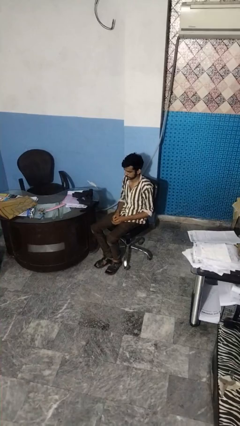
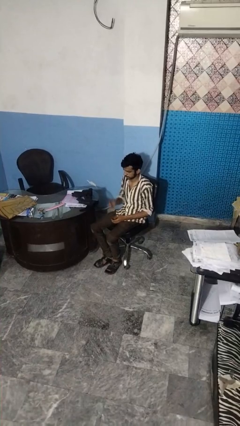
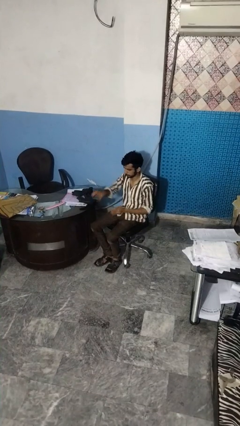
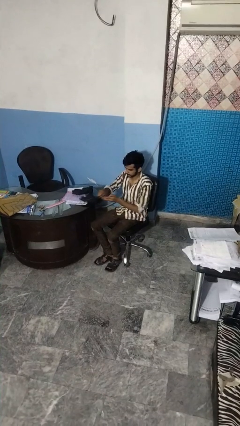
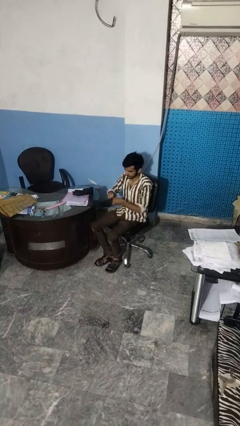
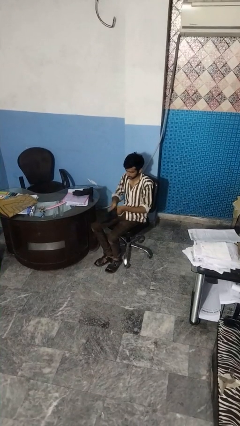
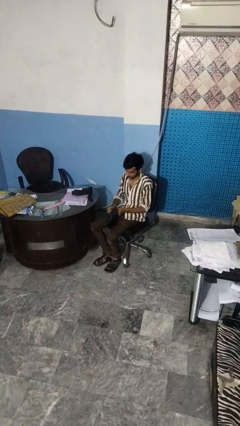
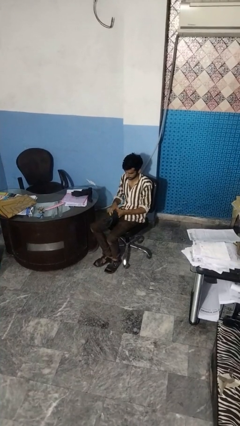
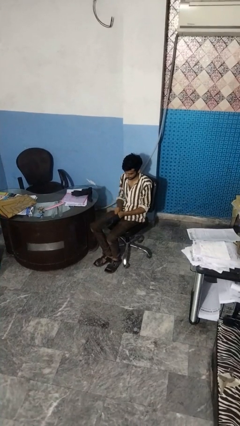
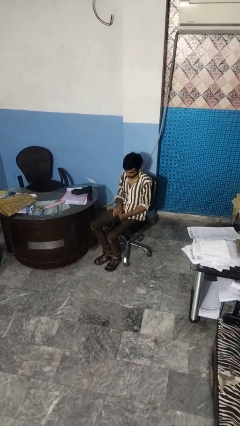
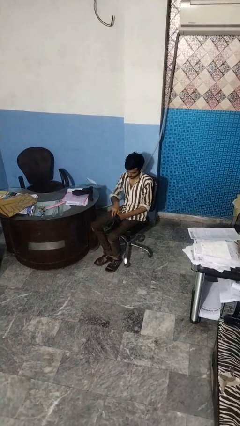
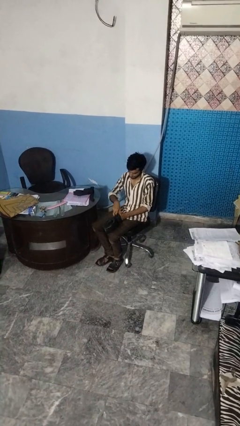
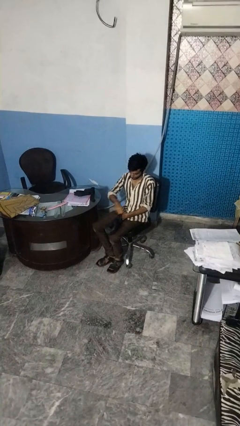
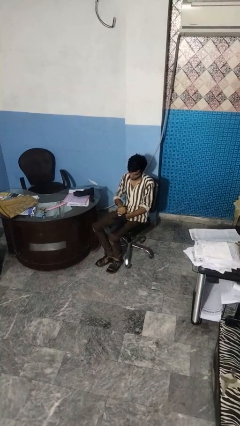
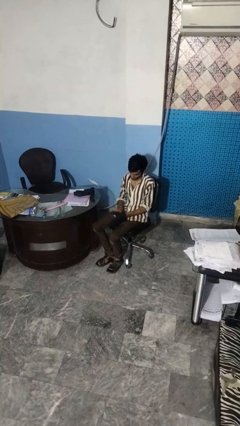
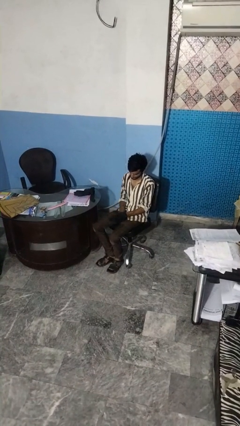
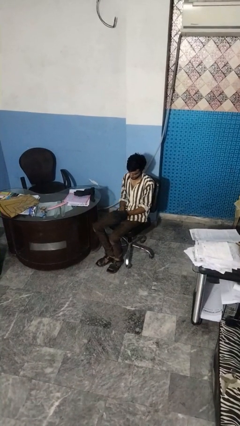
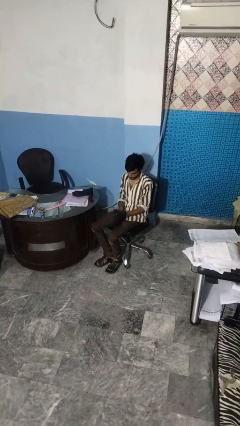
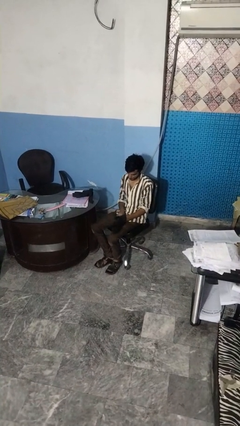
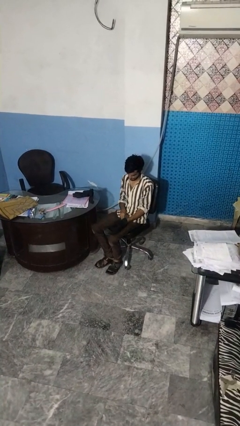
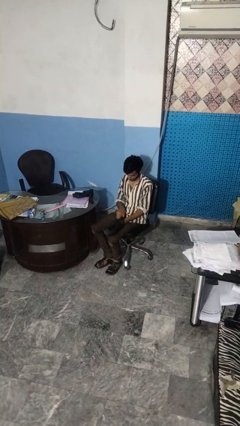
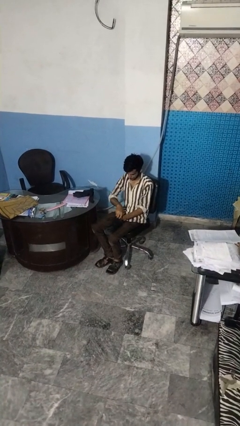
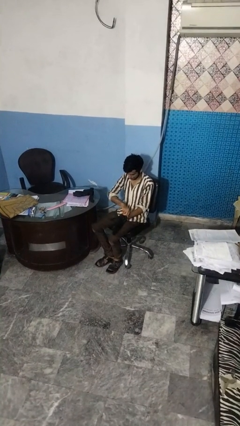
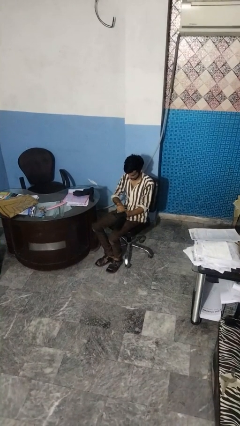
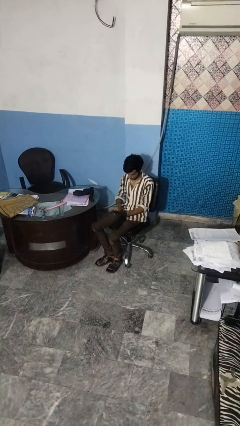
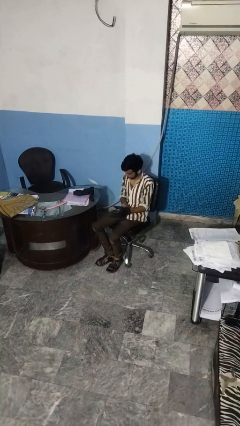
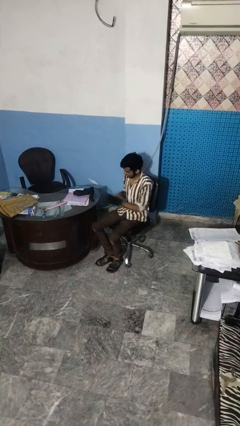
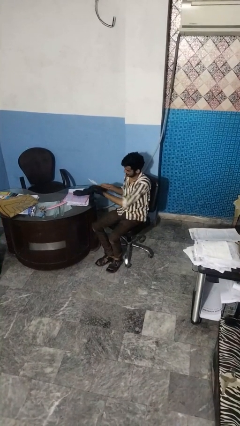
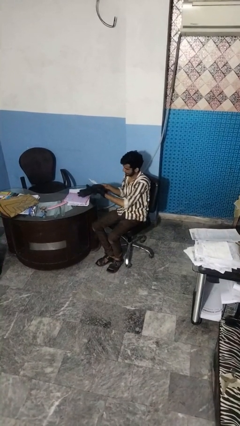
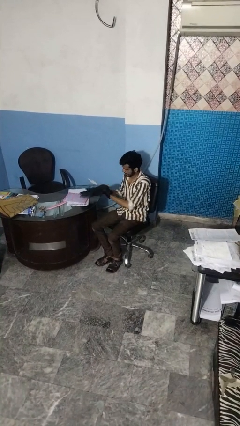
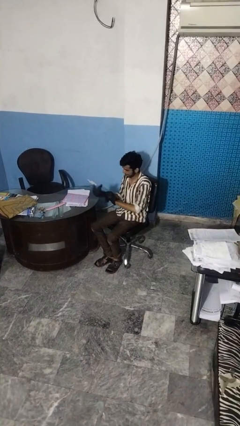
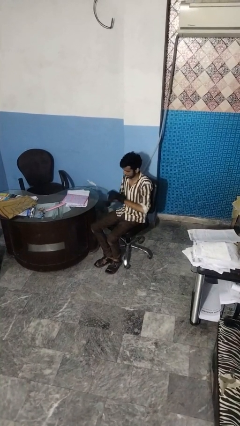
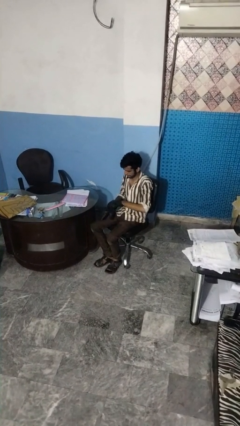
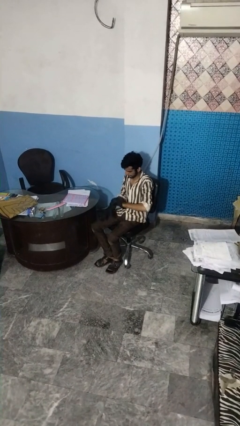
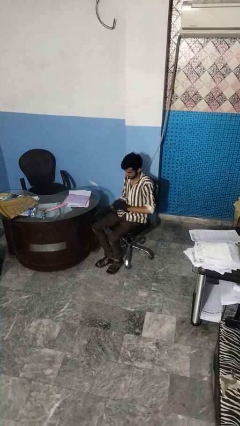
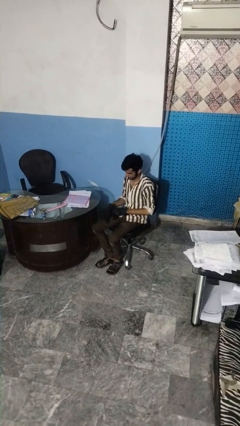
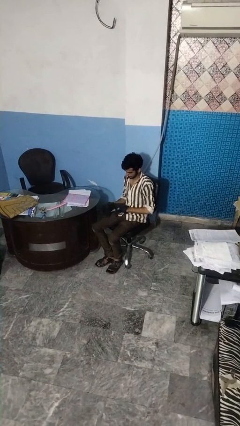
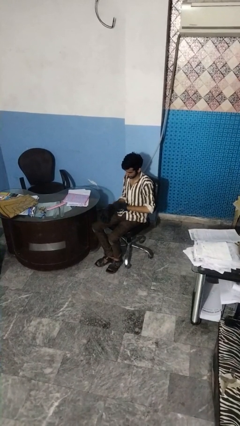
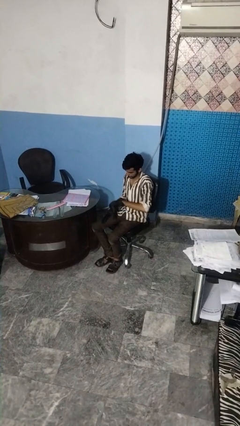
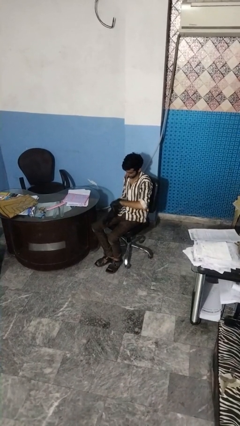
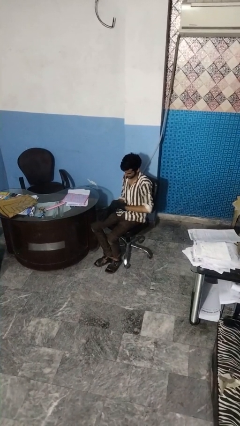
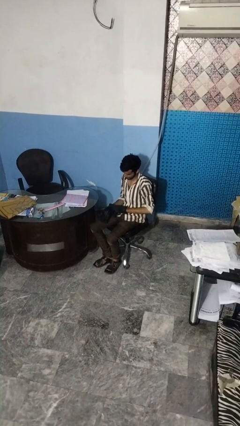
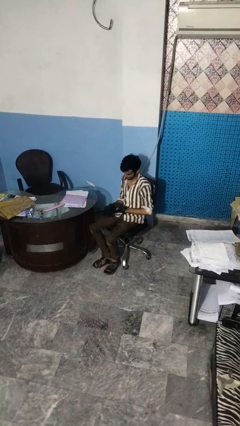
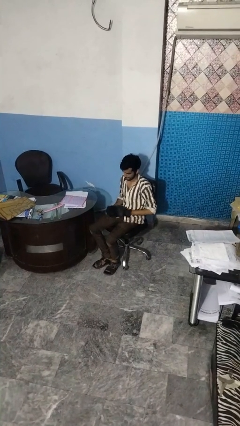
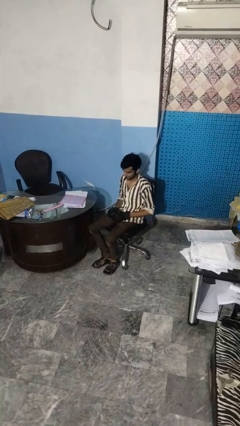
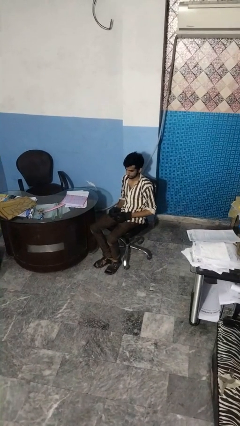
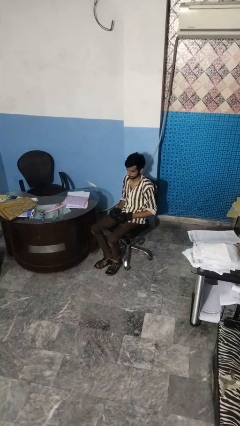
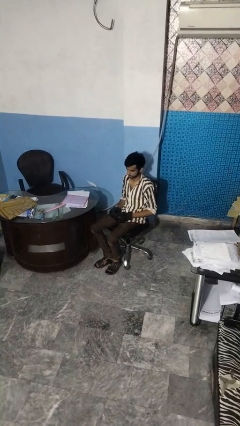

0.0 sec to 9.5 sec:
person puts on gloves

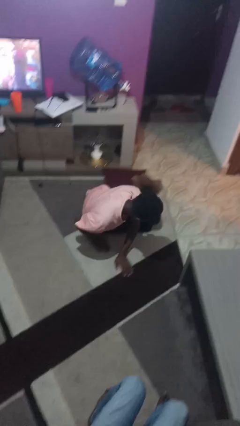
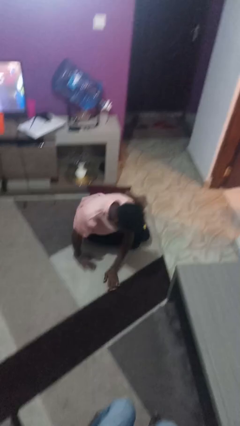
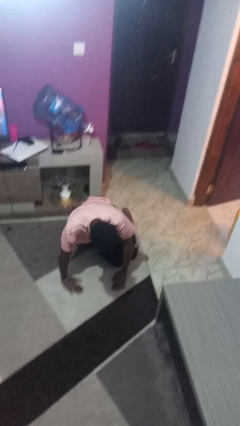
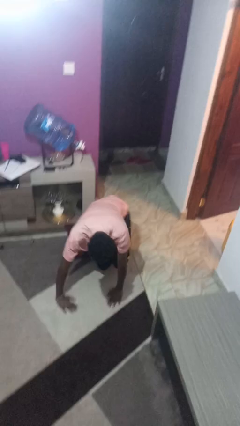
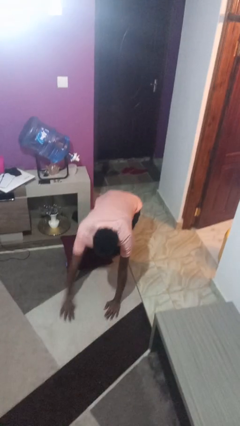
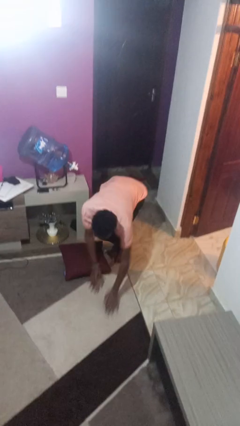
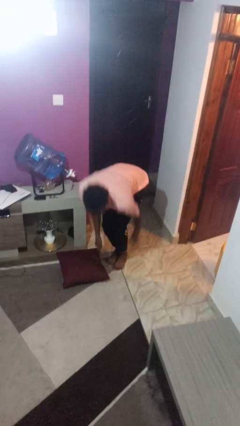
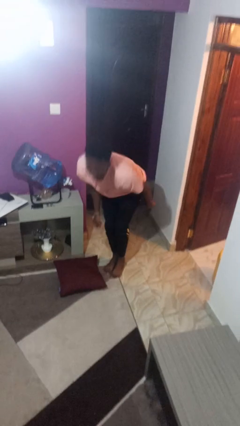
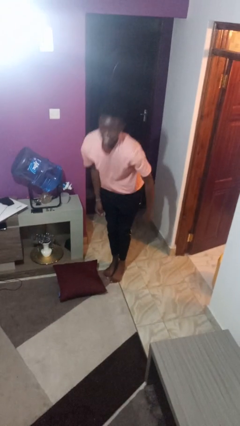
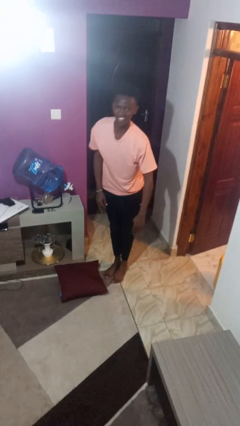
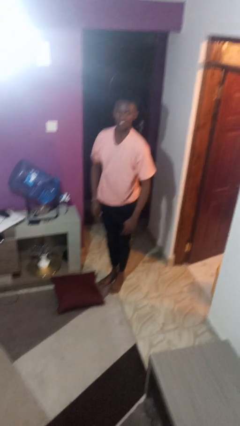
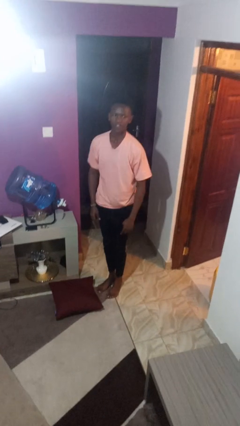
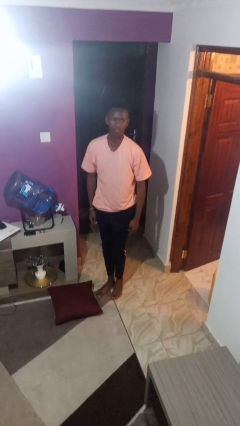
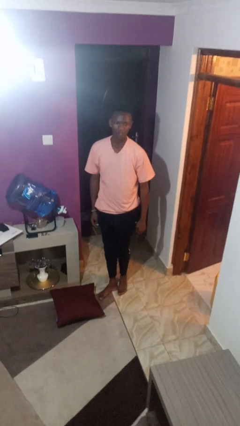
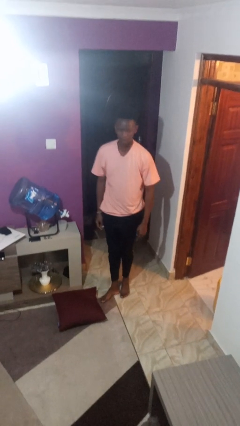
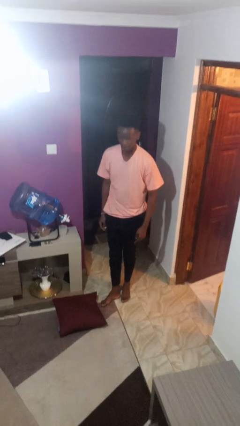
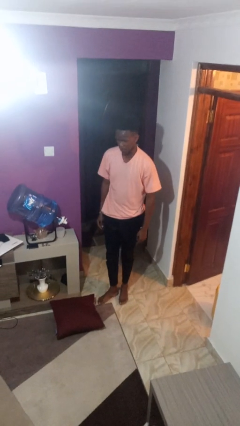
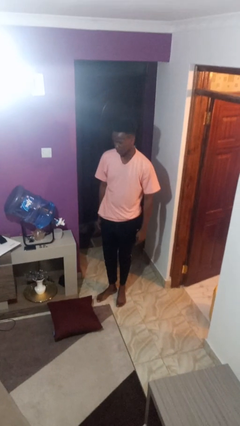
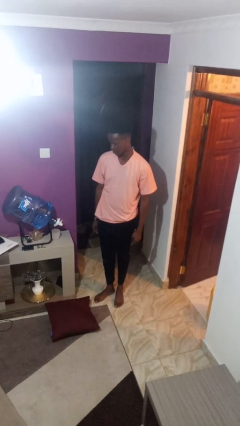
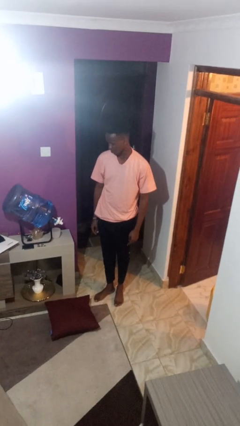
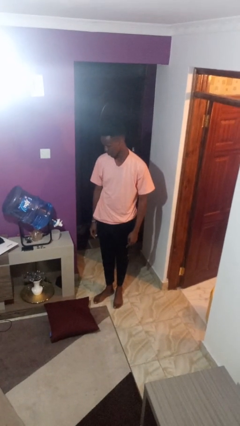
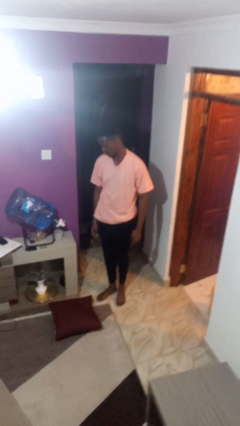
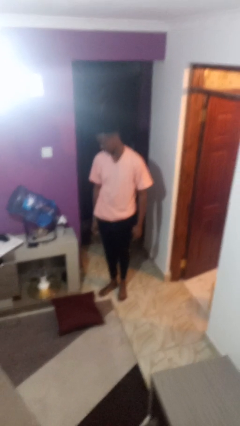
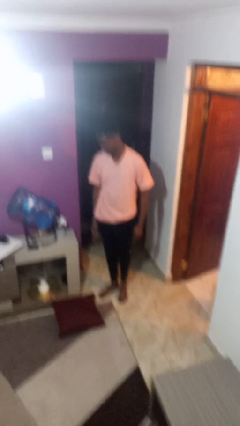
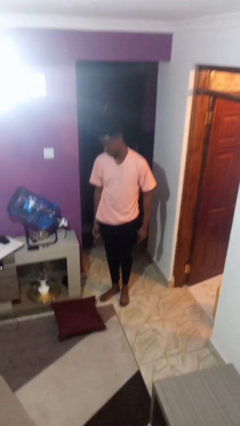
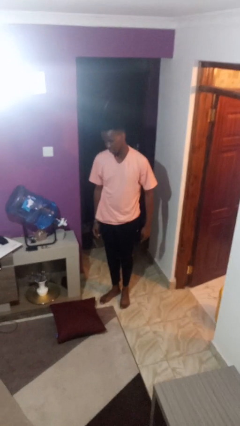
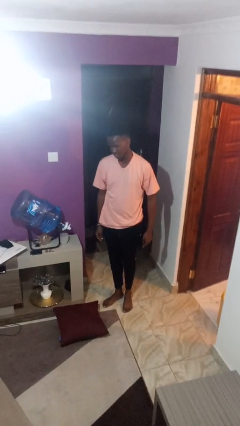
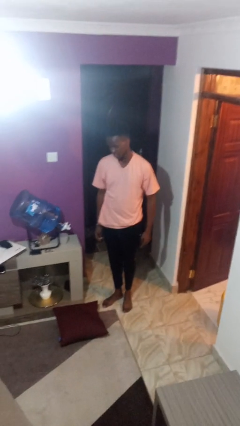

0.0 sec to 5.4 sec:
person stands up from floor

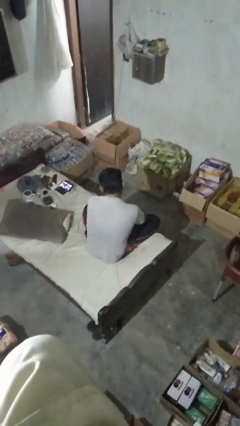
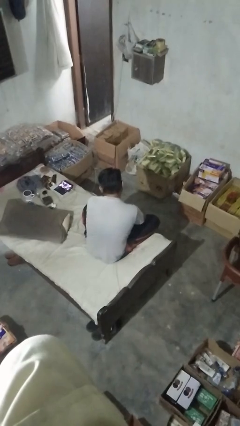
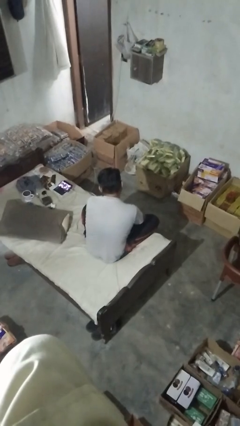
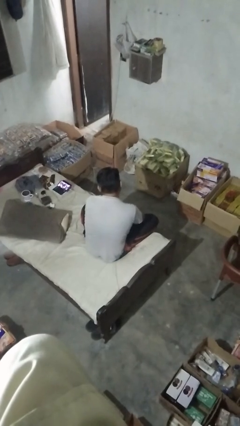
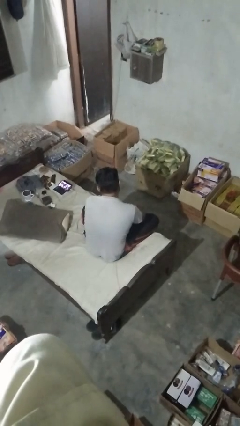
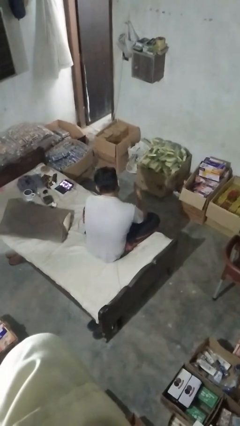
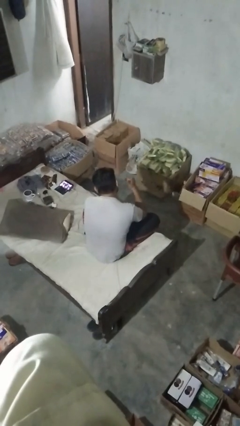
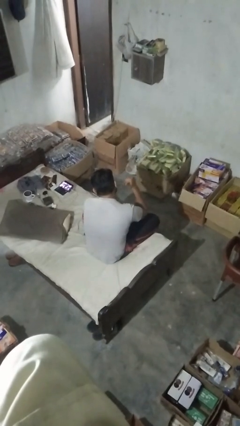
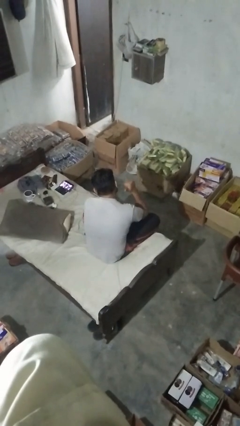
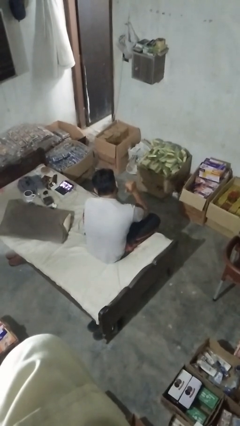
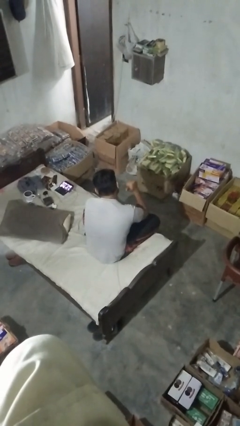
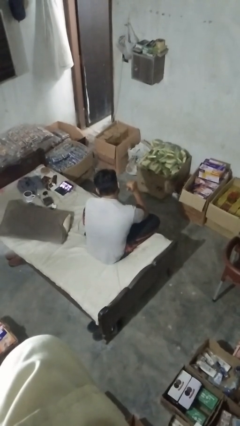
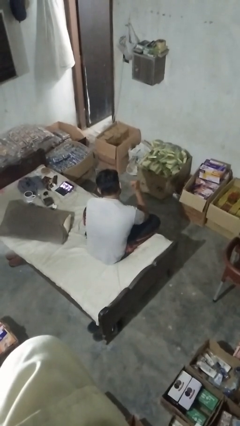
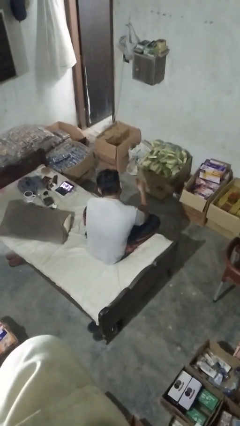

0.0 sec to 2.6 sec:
person gestures behind me

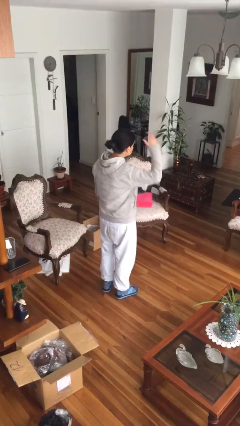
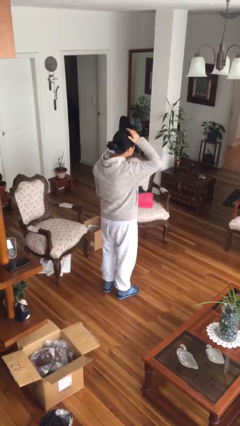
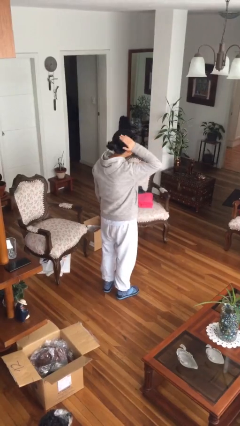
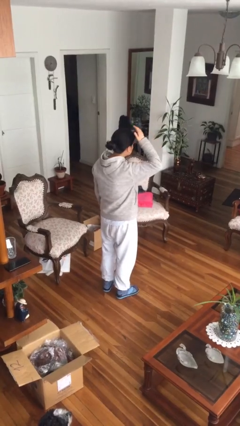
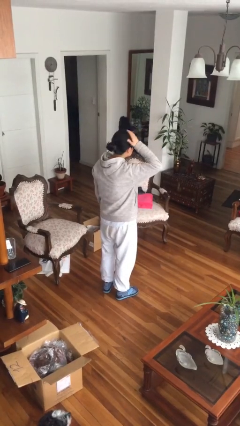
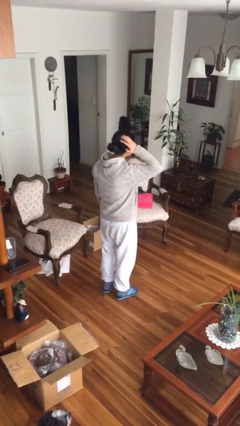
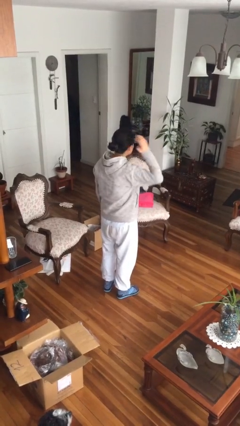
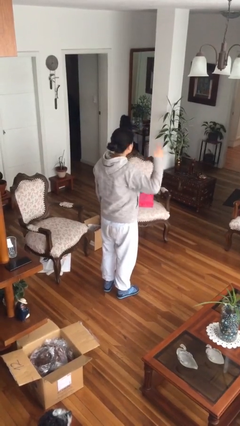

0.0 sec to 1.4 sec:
person pats head
